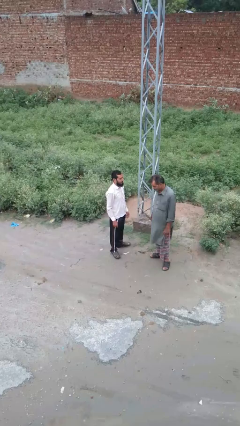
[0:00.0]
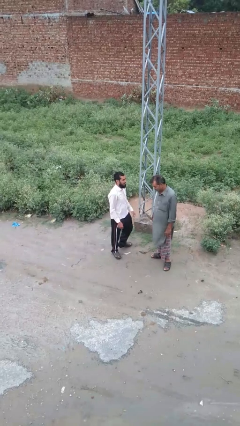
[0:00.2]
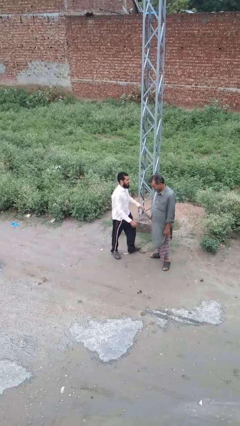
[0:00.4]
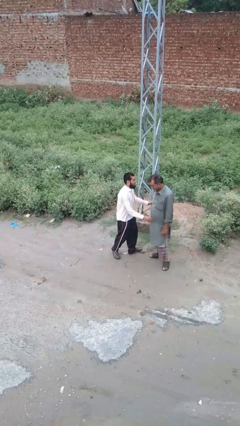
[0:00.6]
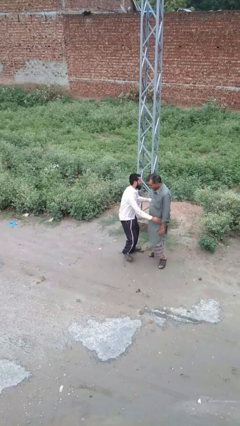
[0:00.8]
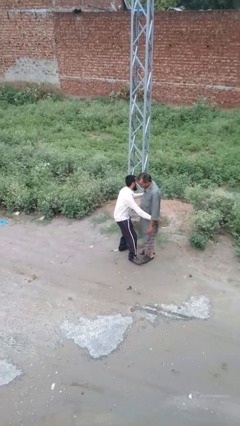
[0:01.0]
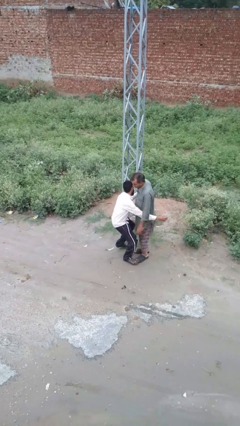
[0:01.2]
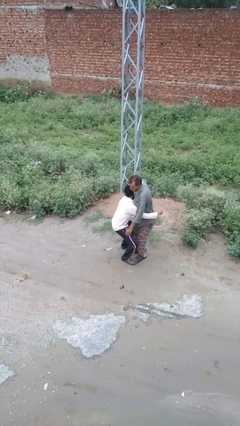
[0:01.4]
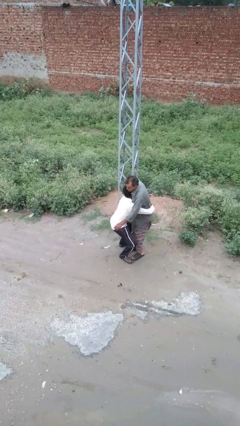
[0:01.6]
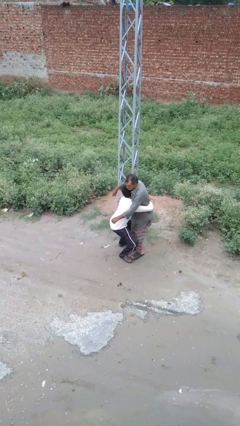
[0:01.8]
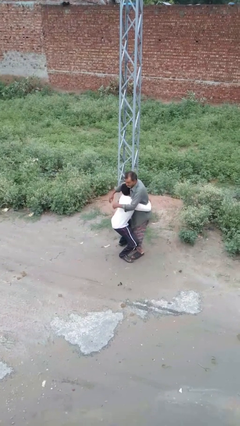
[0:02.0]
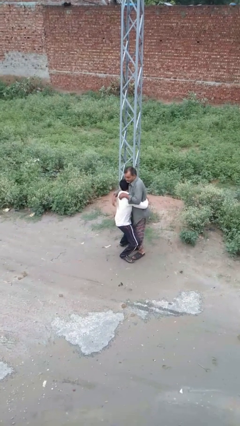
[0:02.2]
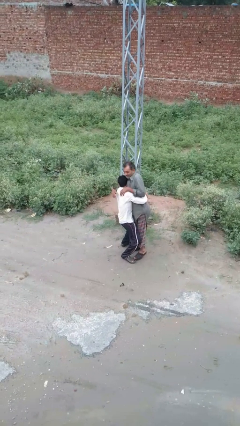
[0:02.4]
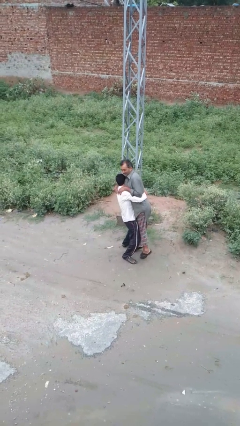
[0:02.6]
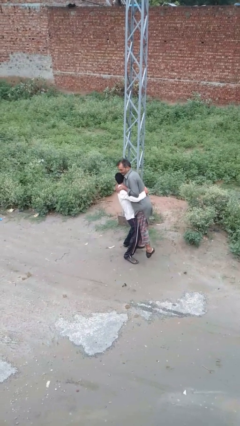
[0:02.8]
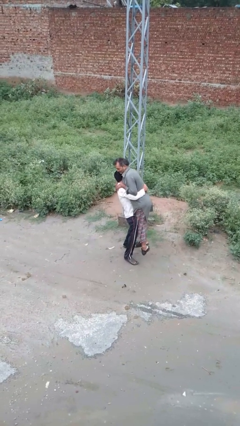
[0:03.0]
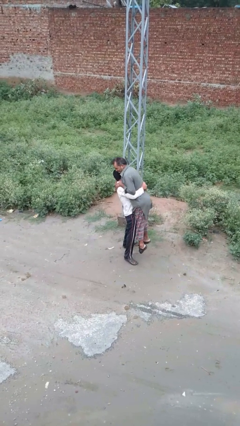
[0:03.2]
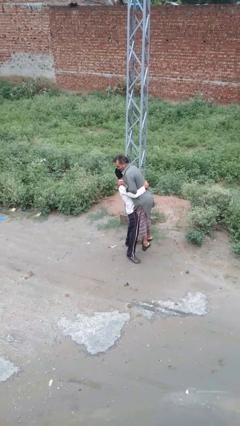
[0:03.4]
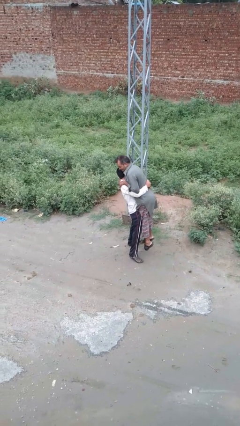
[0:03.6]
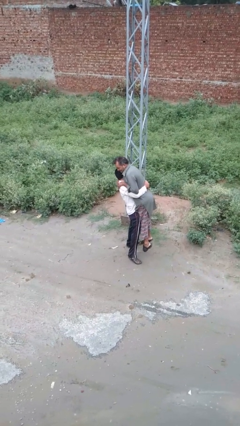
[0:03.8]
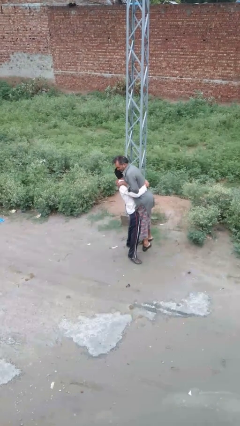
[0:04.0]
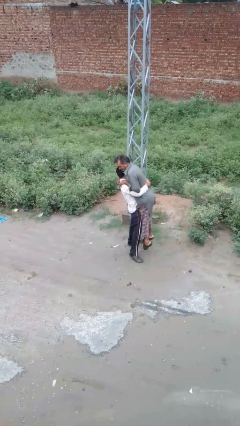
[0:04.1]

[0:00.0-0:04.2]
person picks up person

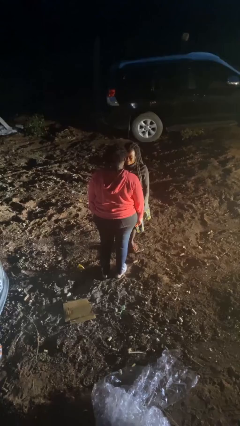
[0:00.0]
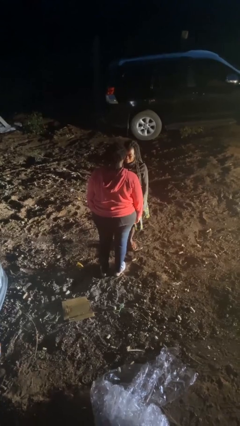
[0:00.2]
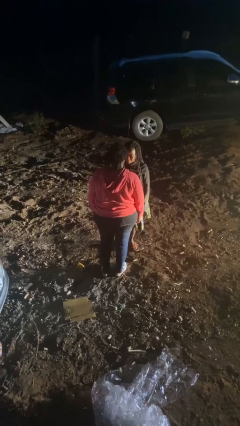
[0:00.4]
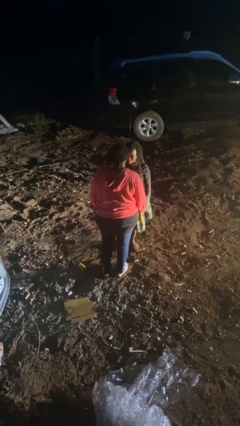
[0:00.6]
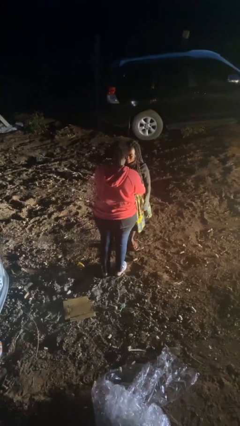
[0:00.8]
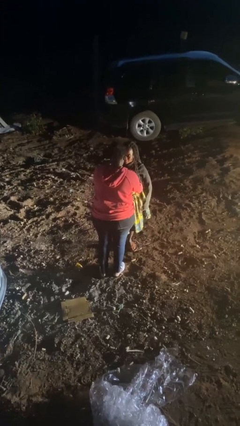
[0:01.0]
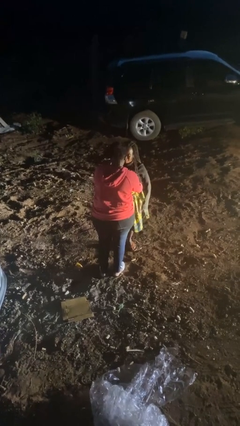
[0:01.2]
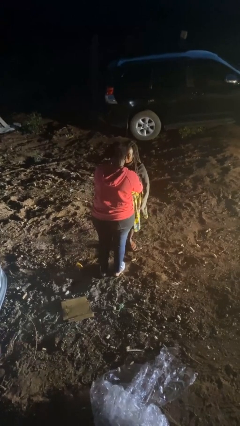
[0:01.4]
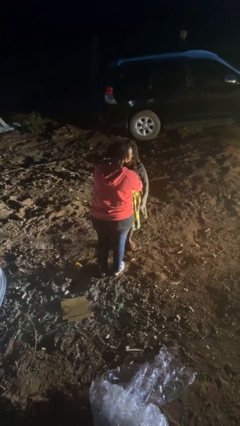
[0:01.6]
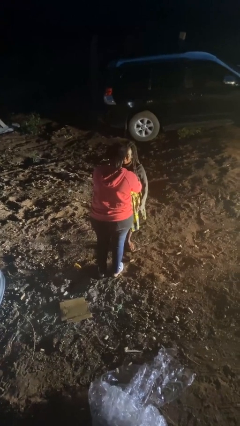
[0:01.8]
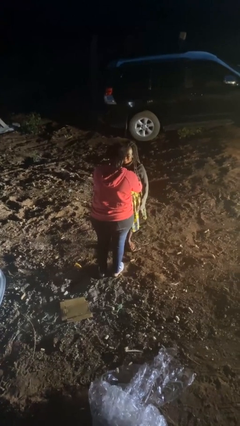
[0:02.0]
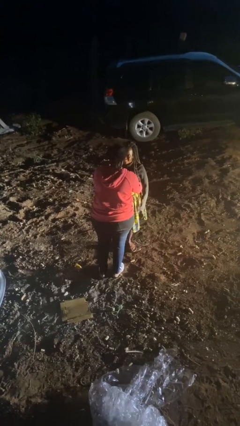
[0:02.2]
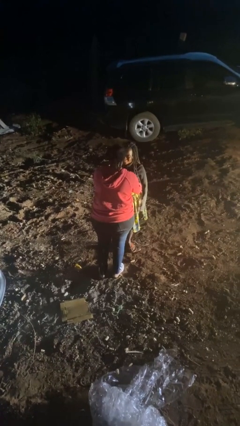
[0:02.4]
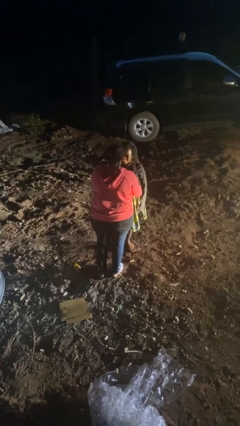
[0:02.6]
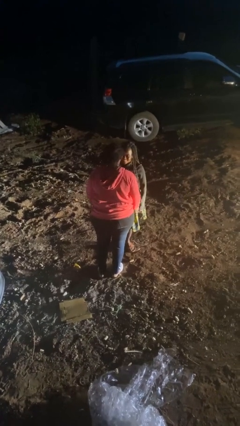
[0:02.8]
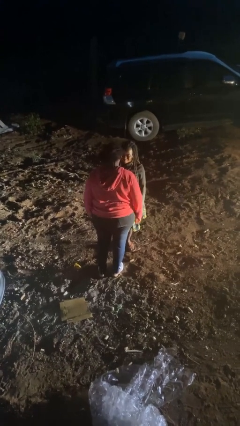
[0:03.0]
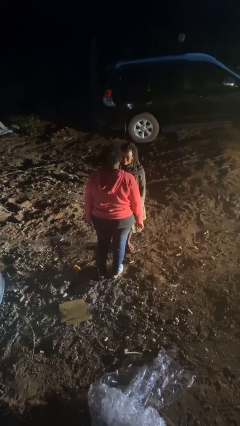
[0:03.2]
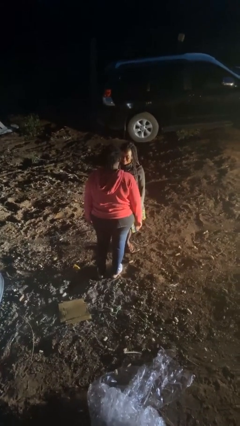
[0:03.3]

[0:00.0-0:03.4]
person tickles person

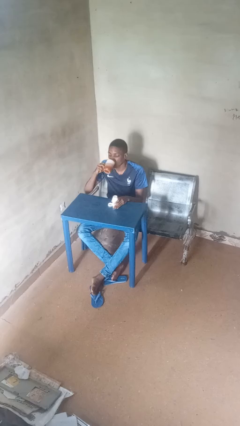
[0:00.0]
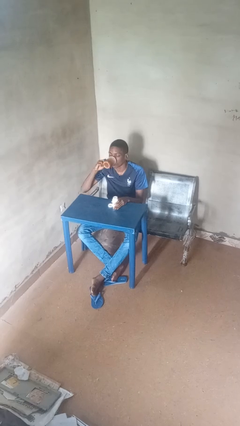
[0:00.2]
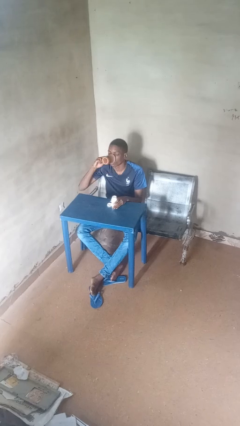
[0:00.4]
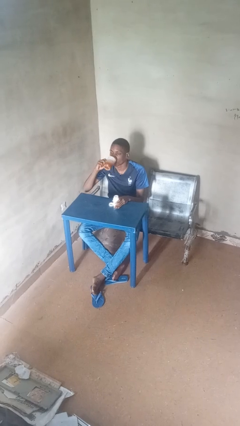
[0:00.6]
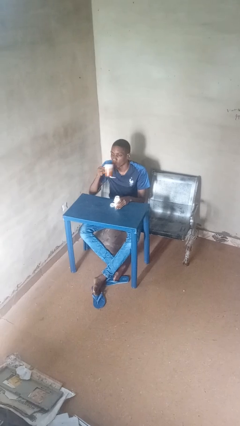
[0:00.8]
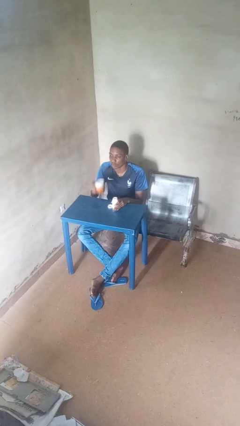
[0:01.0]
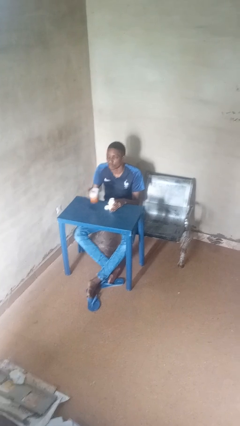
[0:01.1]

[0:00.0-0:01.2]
person drinks from cup

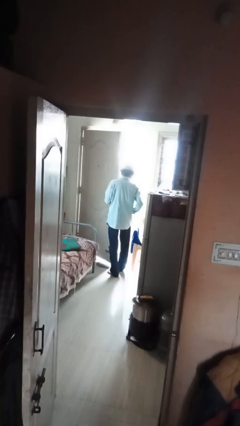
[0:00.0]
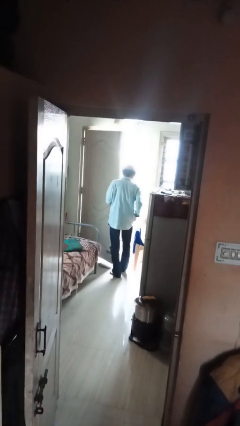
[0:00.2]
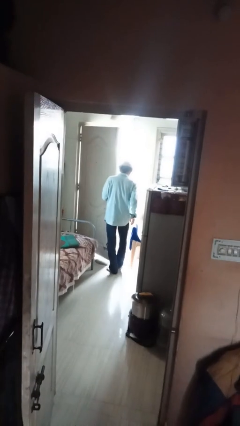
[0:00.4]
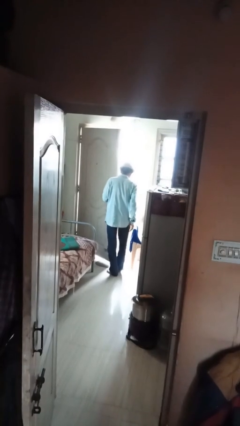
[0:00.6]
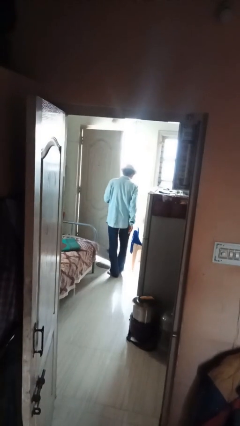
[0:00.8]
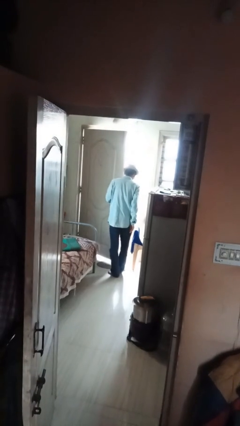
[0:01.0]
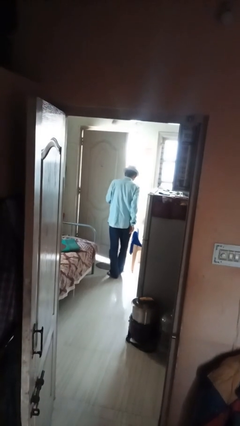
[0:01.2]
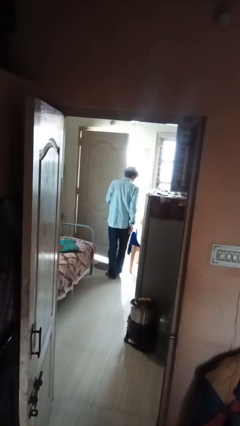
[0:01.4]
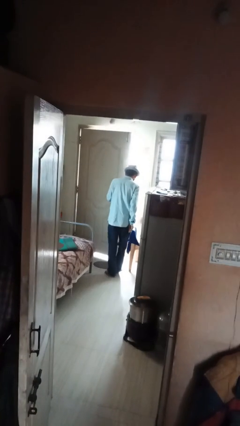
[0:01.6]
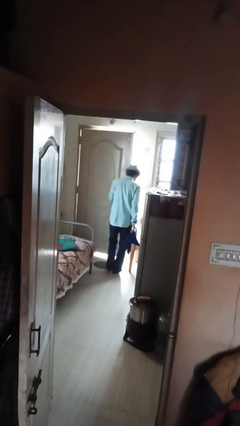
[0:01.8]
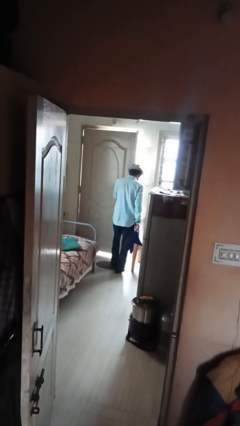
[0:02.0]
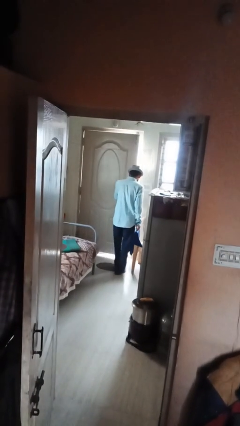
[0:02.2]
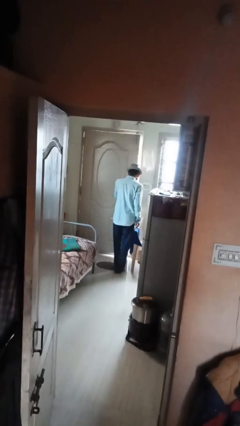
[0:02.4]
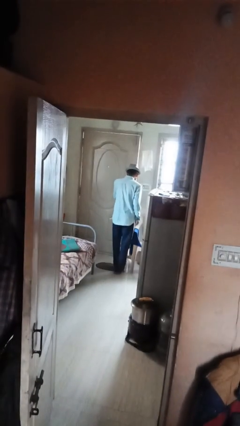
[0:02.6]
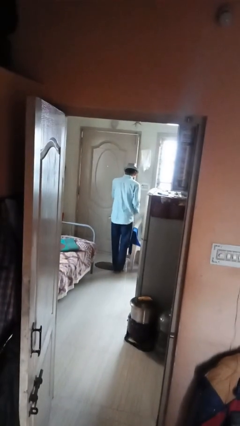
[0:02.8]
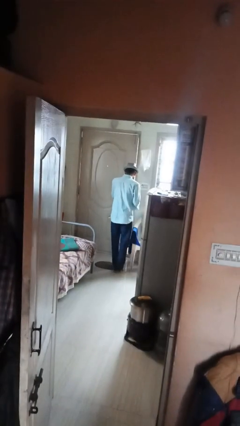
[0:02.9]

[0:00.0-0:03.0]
person opens facility door

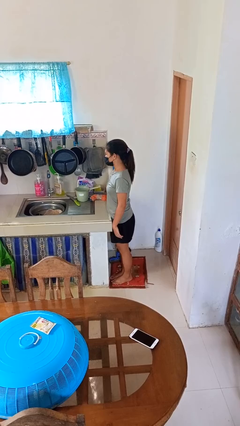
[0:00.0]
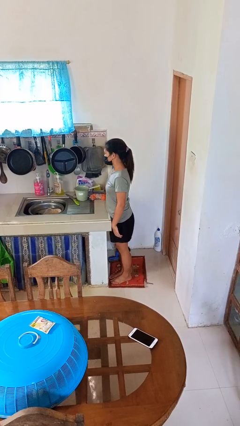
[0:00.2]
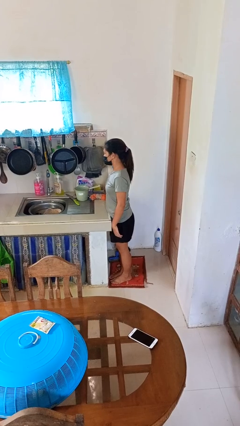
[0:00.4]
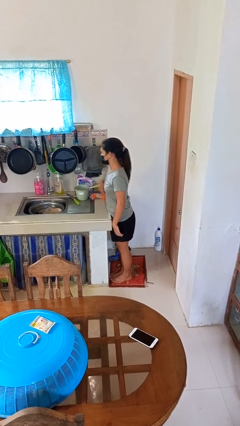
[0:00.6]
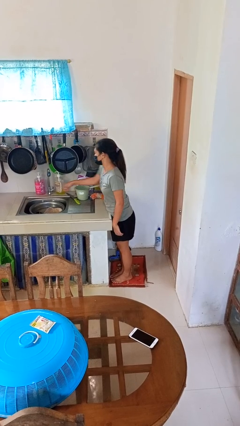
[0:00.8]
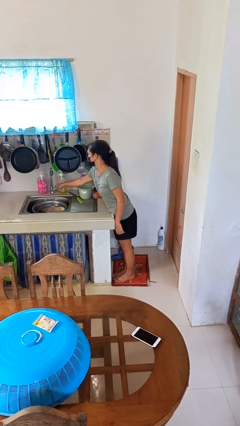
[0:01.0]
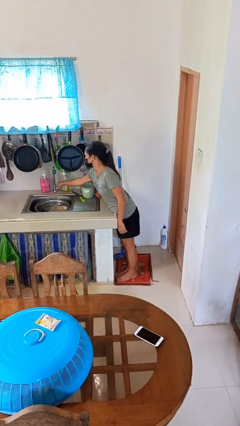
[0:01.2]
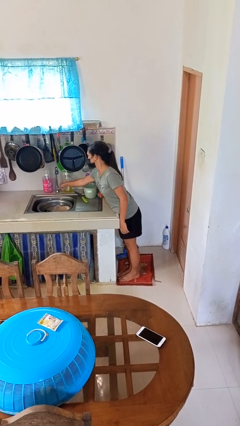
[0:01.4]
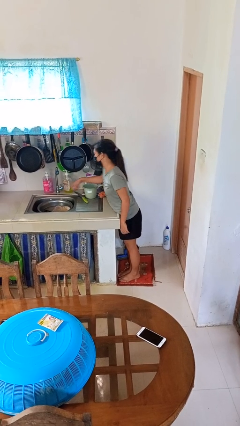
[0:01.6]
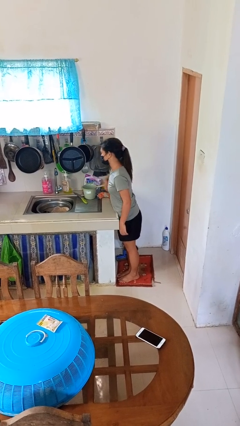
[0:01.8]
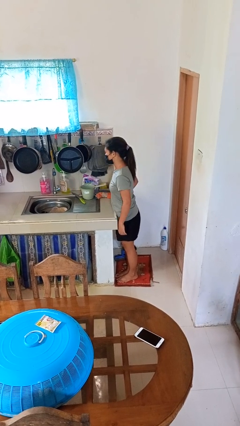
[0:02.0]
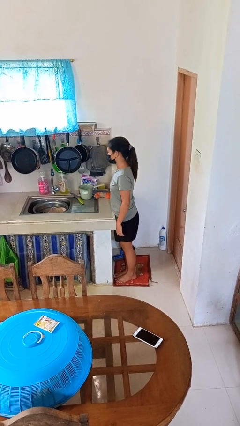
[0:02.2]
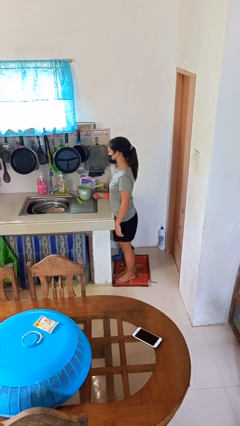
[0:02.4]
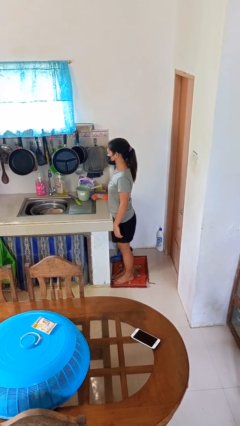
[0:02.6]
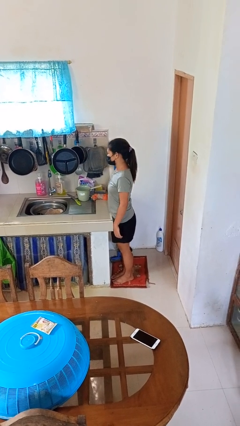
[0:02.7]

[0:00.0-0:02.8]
person turns off faucet

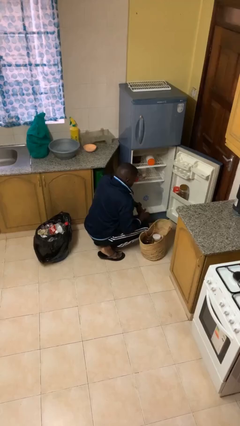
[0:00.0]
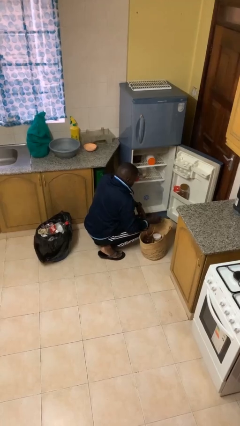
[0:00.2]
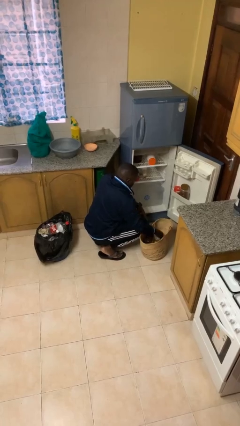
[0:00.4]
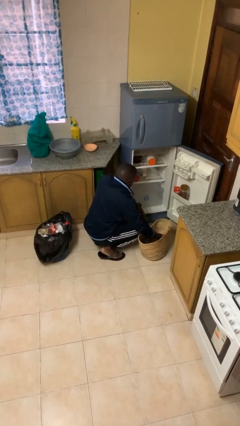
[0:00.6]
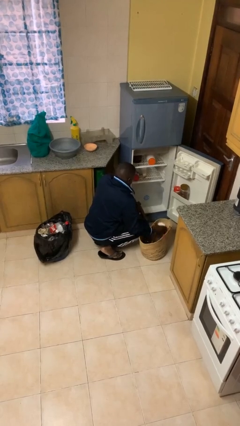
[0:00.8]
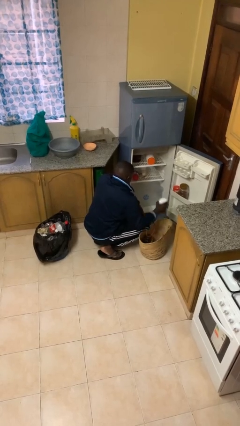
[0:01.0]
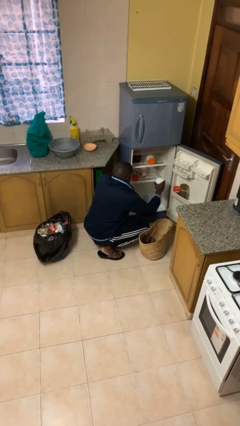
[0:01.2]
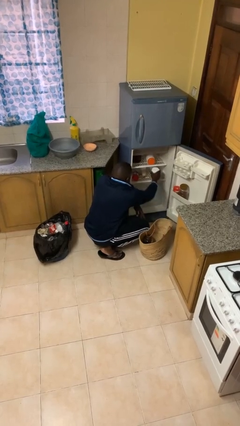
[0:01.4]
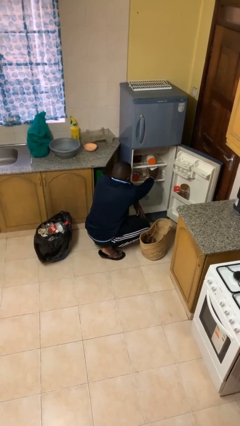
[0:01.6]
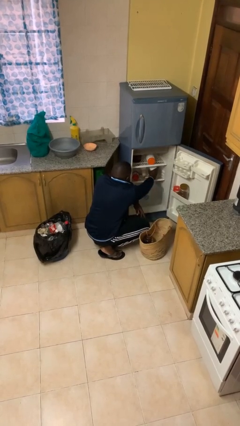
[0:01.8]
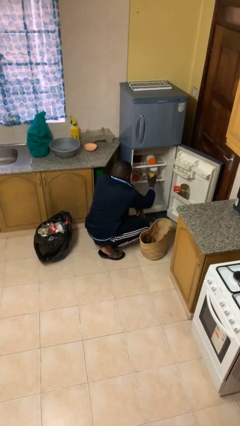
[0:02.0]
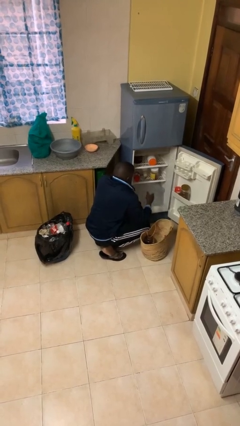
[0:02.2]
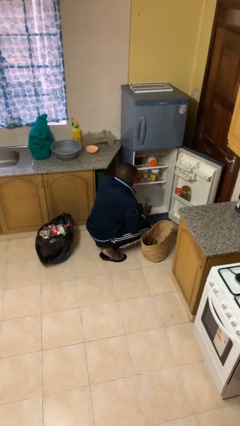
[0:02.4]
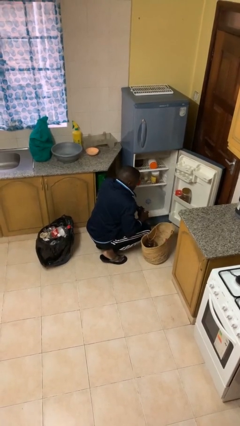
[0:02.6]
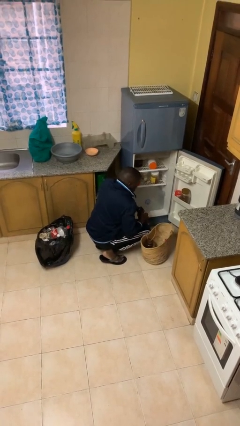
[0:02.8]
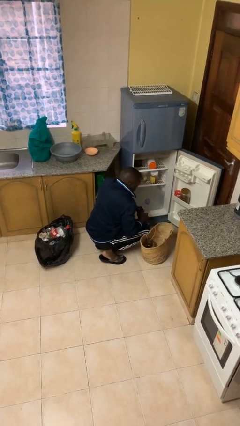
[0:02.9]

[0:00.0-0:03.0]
person loads groceries into refrigerator
